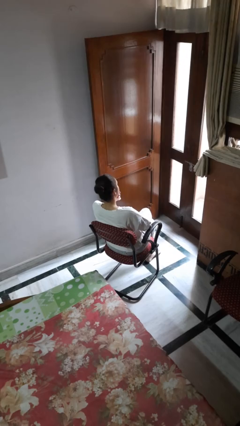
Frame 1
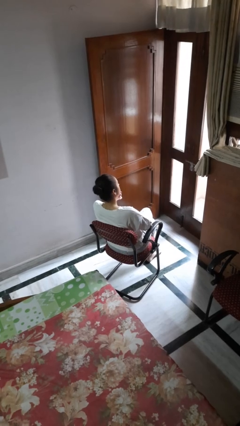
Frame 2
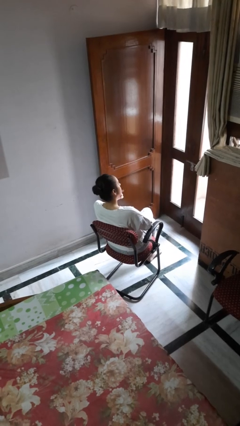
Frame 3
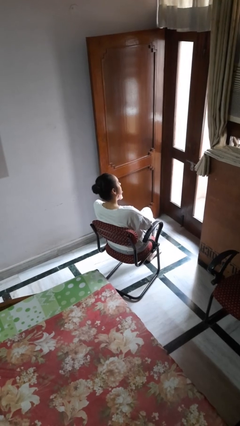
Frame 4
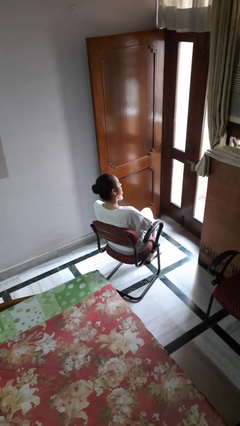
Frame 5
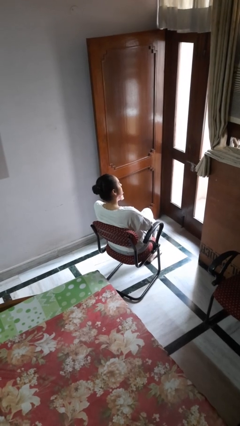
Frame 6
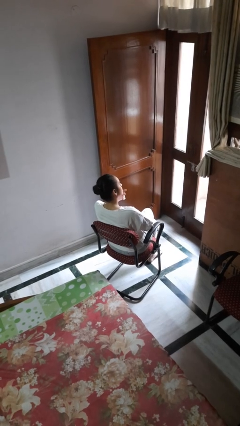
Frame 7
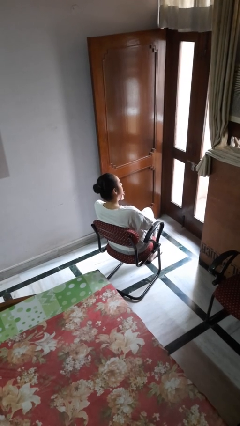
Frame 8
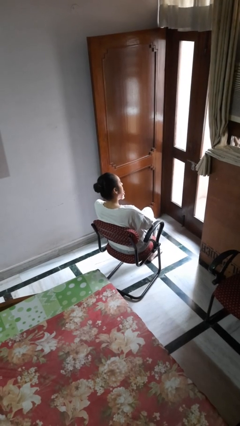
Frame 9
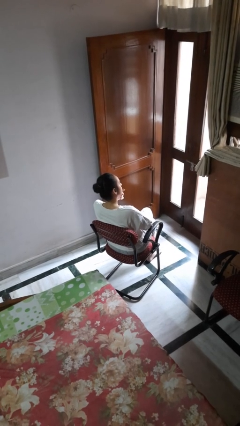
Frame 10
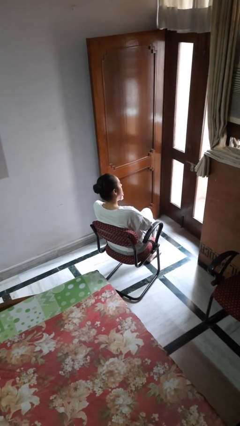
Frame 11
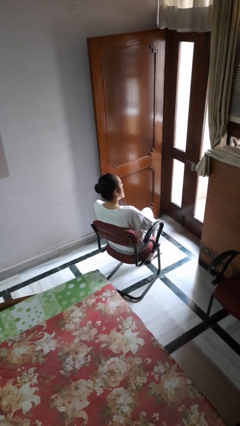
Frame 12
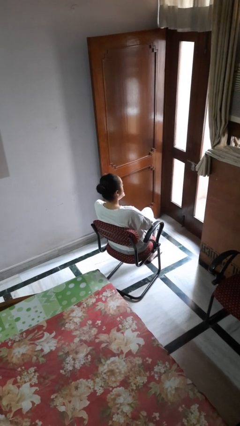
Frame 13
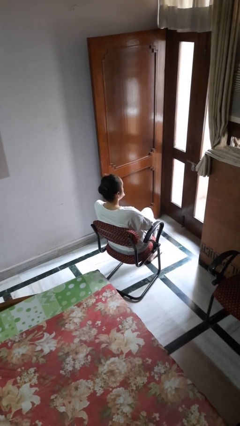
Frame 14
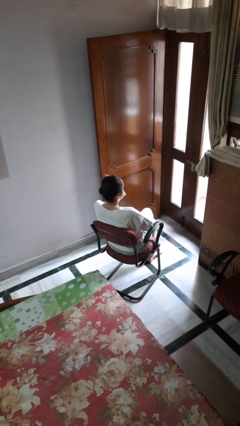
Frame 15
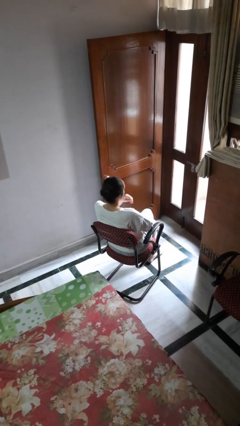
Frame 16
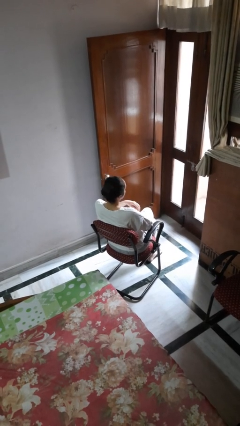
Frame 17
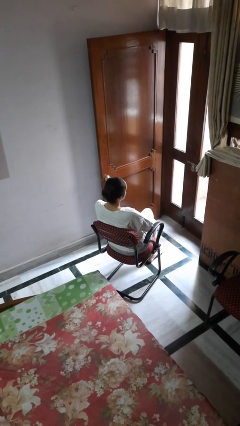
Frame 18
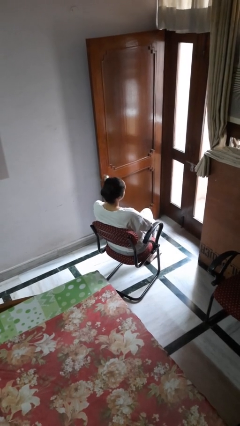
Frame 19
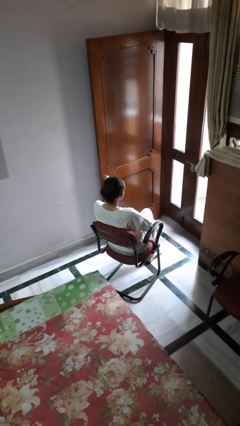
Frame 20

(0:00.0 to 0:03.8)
person strokes chin

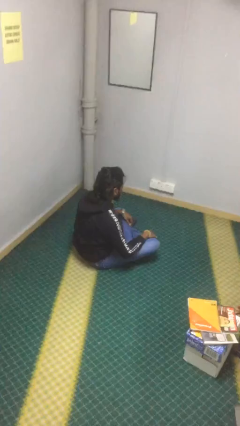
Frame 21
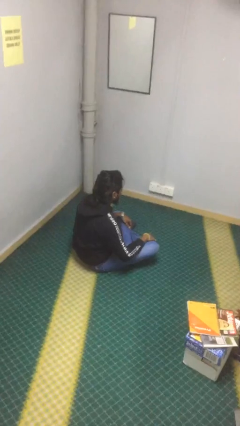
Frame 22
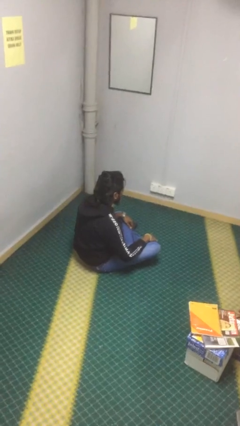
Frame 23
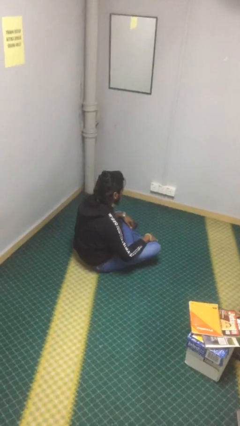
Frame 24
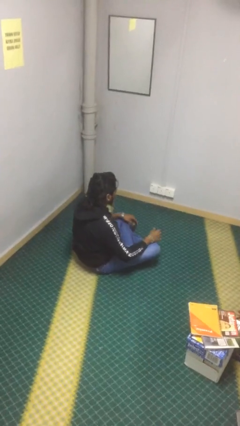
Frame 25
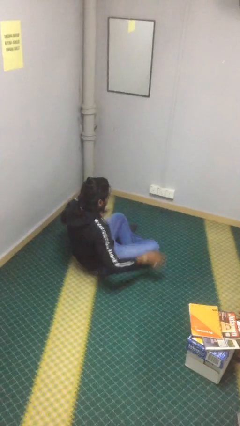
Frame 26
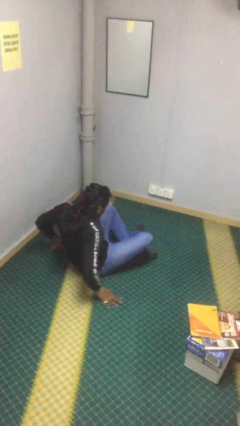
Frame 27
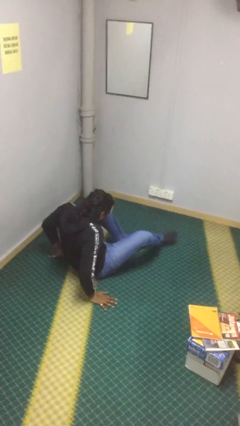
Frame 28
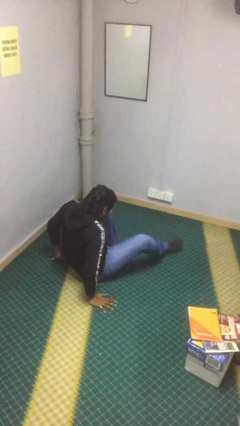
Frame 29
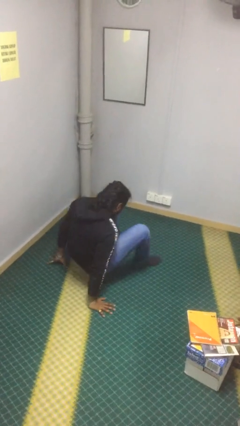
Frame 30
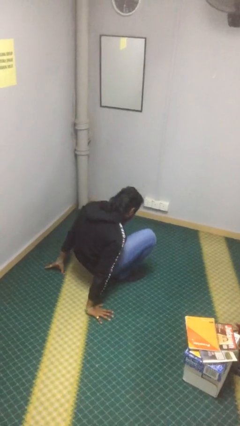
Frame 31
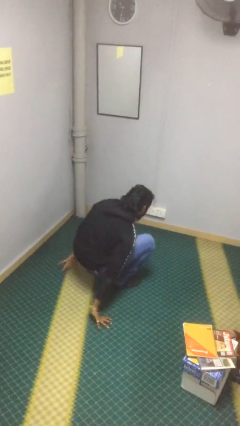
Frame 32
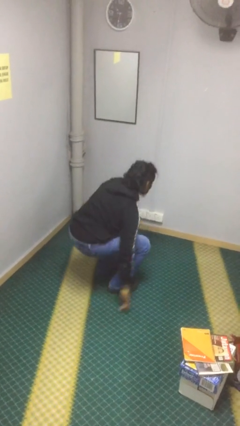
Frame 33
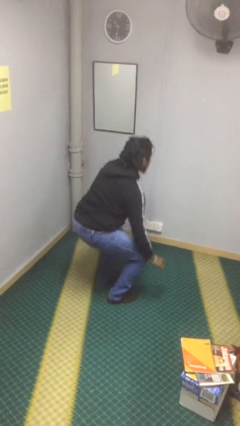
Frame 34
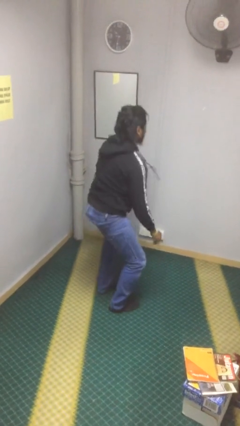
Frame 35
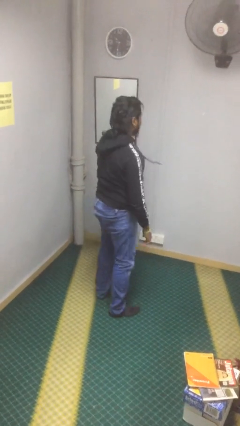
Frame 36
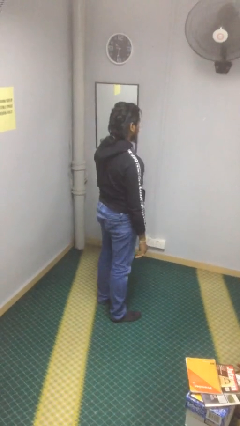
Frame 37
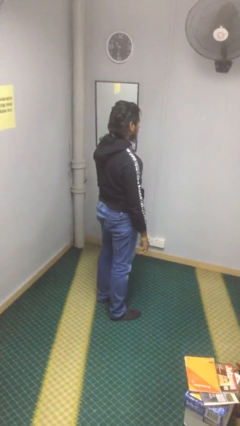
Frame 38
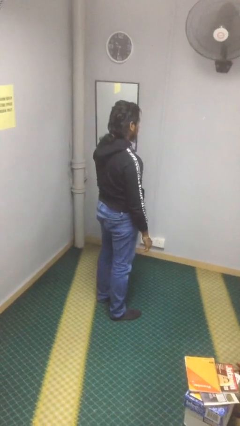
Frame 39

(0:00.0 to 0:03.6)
person stands up from floor

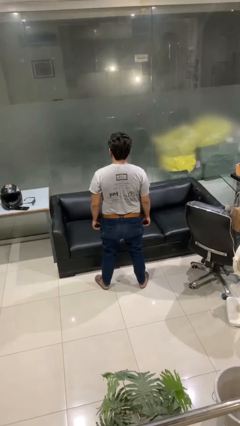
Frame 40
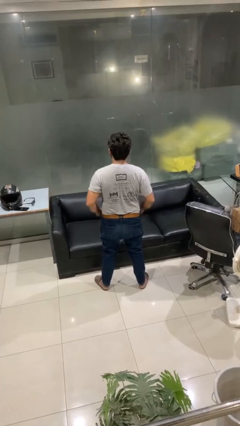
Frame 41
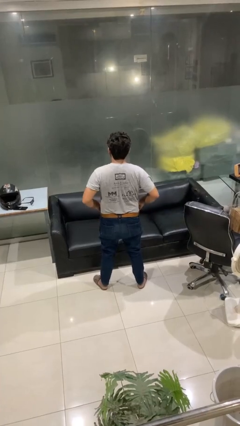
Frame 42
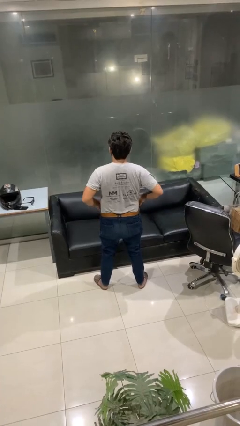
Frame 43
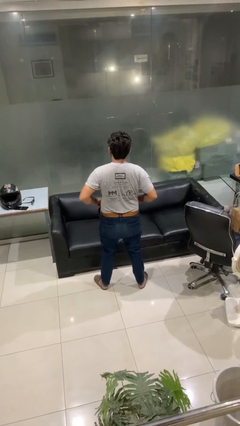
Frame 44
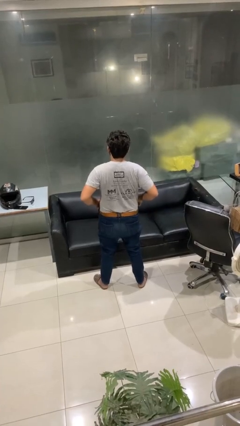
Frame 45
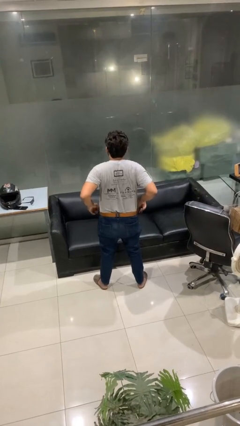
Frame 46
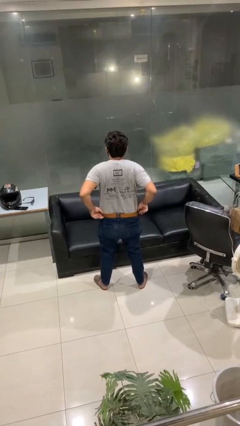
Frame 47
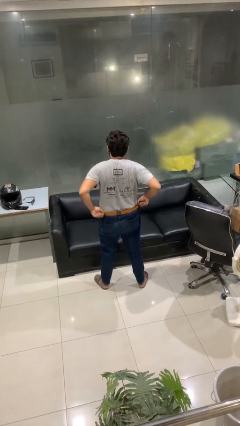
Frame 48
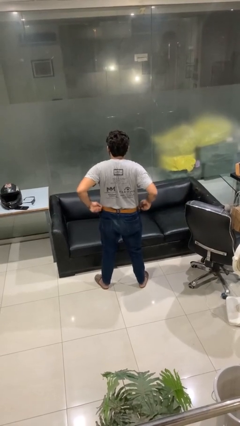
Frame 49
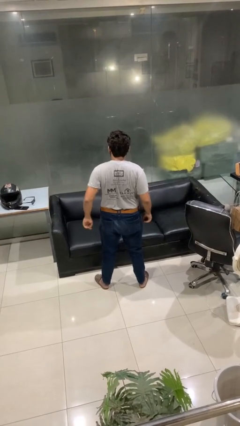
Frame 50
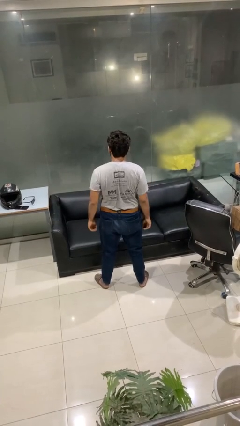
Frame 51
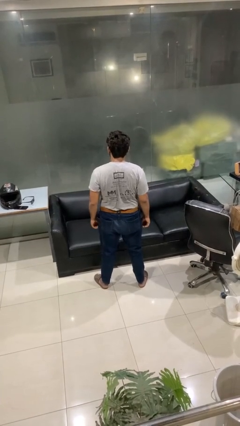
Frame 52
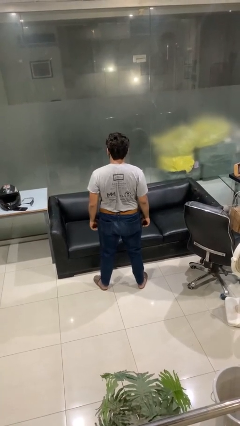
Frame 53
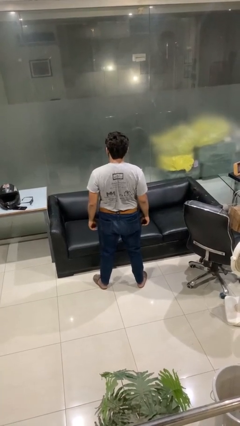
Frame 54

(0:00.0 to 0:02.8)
person hikes up pants

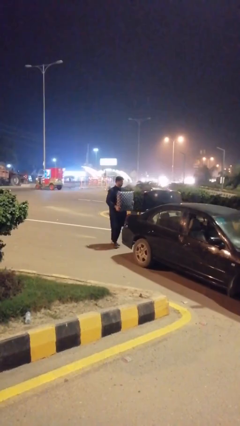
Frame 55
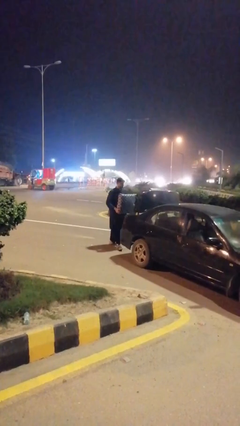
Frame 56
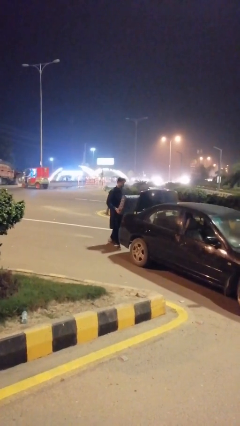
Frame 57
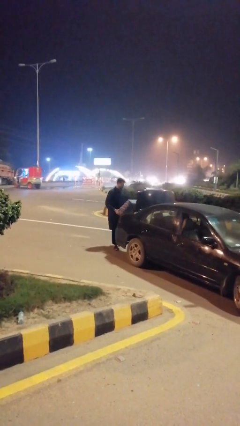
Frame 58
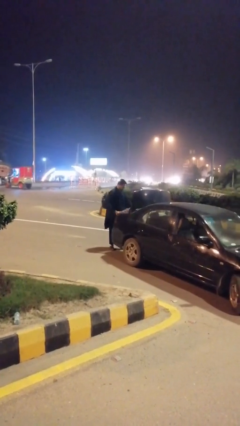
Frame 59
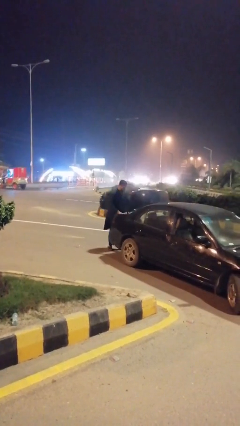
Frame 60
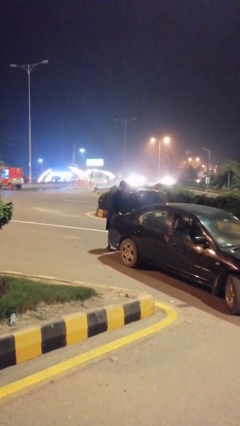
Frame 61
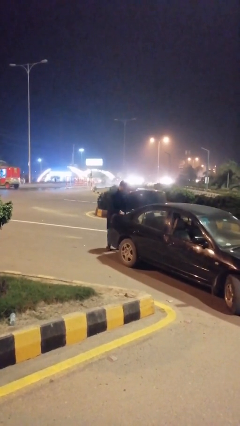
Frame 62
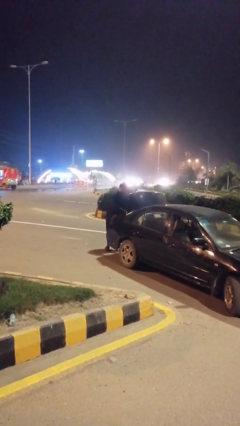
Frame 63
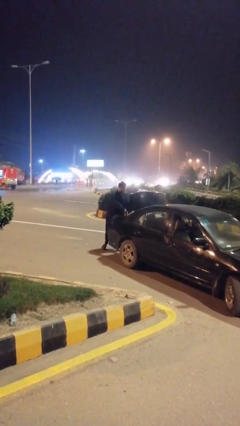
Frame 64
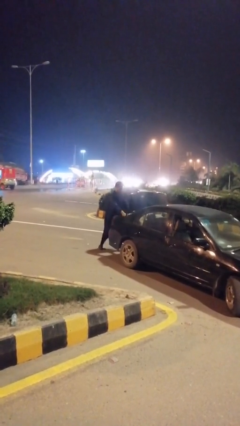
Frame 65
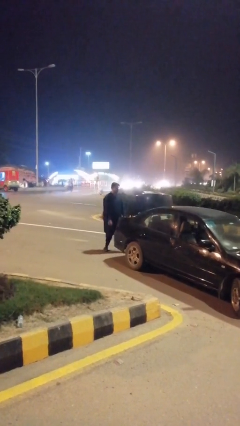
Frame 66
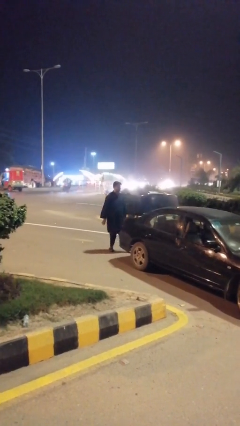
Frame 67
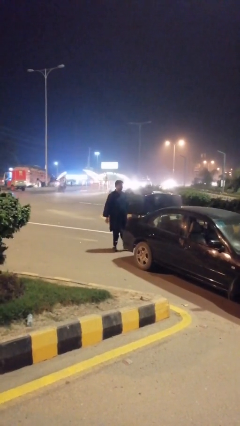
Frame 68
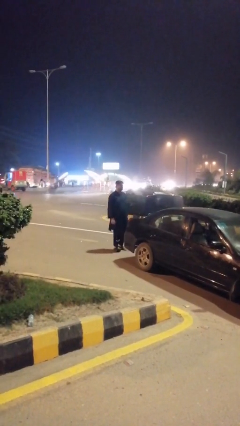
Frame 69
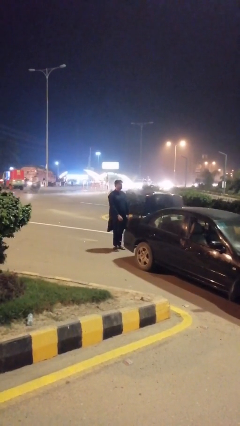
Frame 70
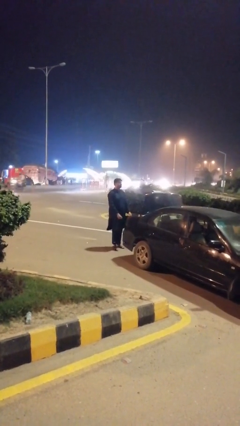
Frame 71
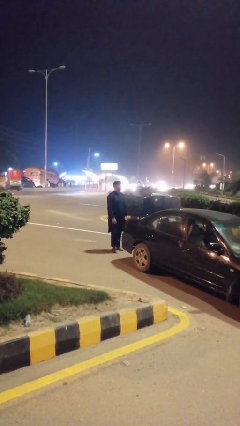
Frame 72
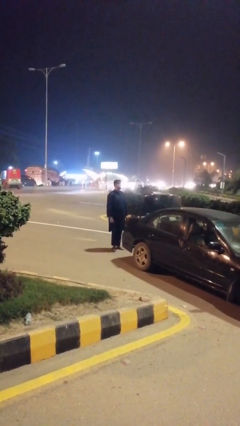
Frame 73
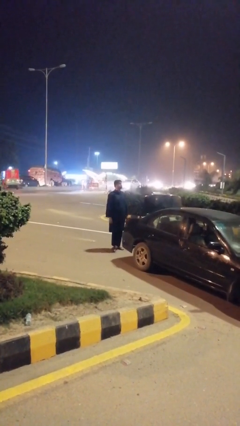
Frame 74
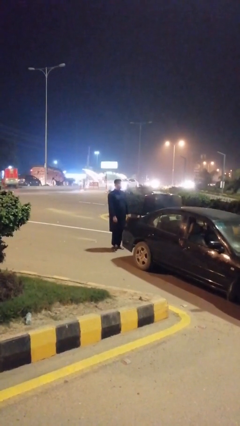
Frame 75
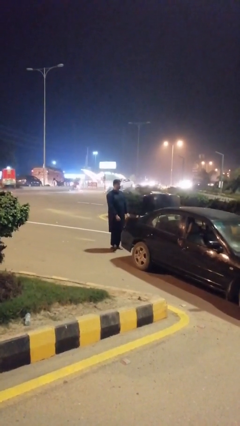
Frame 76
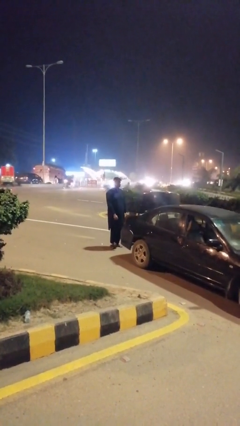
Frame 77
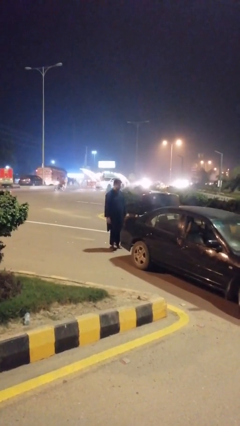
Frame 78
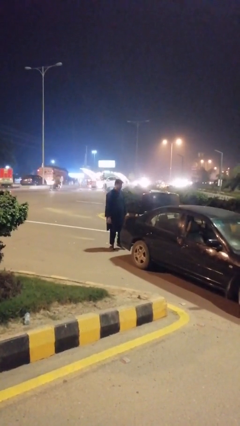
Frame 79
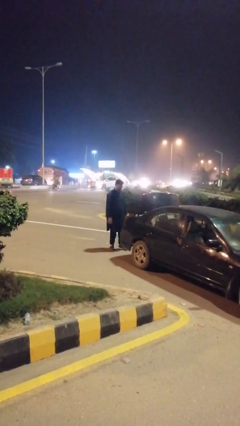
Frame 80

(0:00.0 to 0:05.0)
person loads car

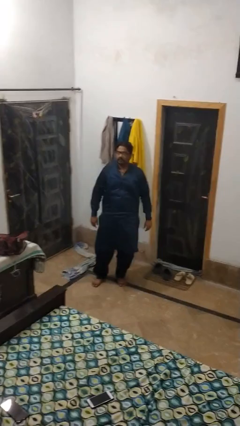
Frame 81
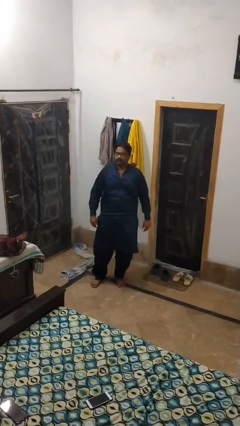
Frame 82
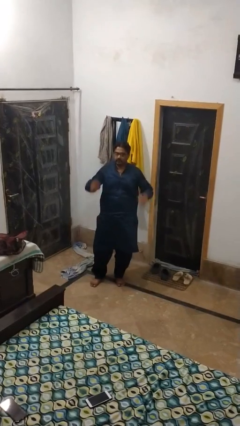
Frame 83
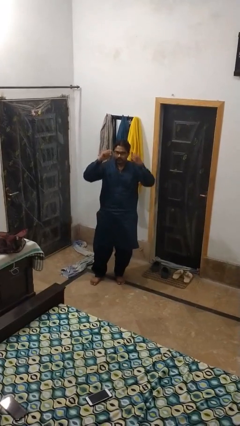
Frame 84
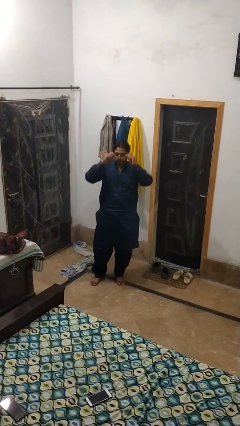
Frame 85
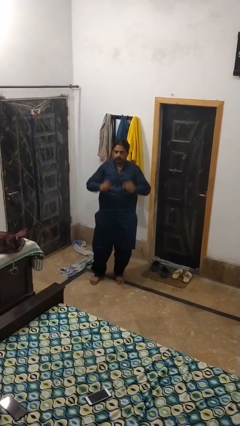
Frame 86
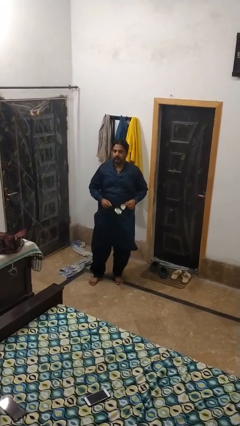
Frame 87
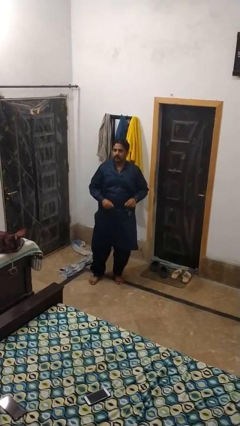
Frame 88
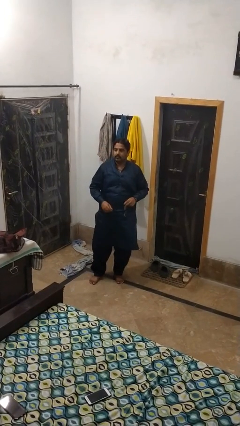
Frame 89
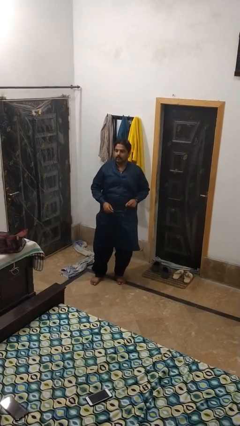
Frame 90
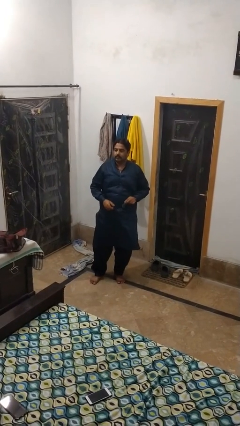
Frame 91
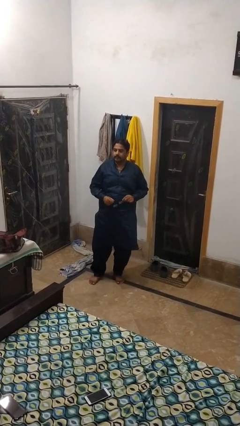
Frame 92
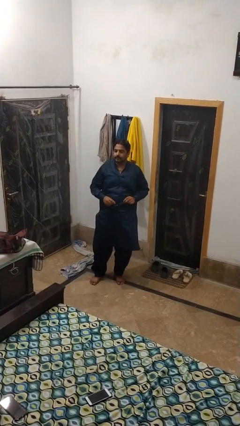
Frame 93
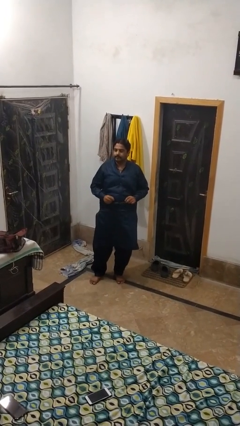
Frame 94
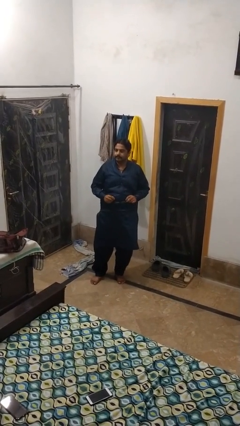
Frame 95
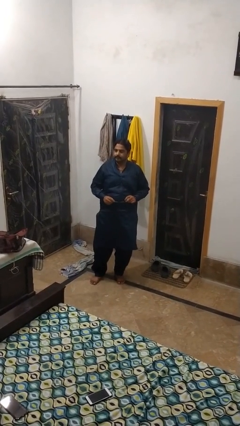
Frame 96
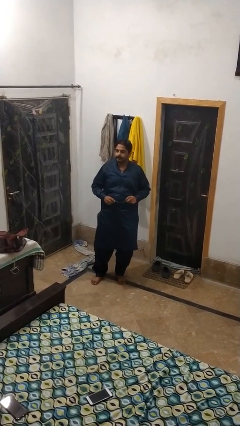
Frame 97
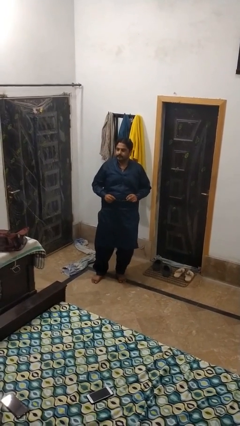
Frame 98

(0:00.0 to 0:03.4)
person takes off glasses
